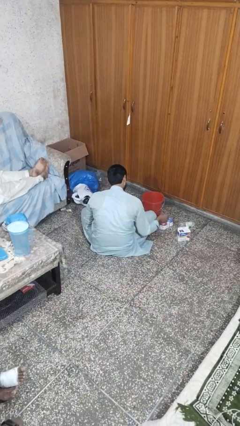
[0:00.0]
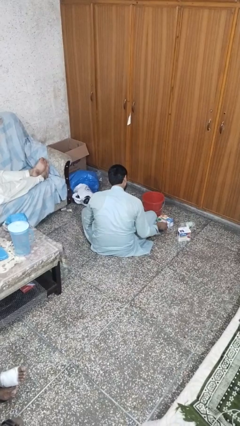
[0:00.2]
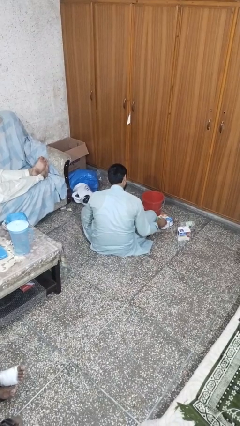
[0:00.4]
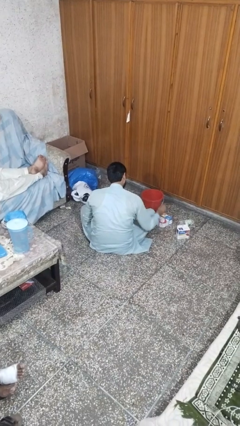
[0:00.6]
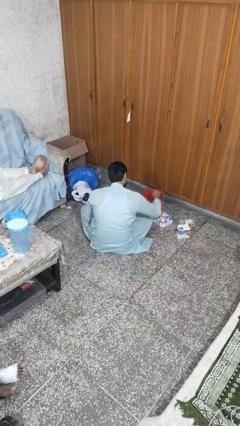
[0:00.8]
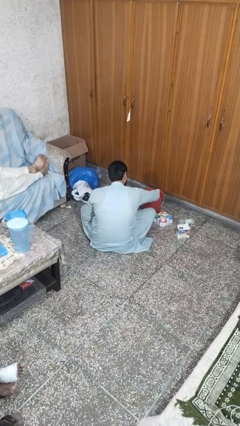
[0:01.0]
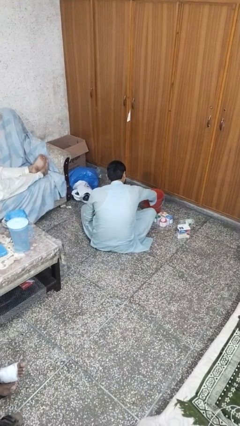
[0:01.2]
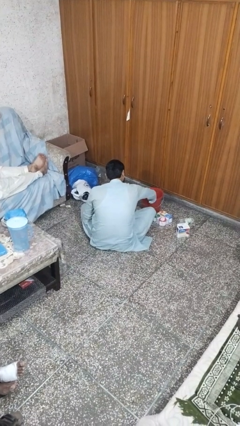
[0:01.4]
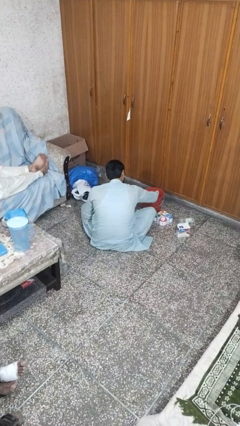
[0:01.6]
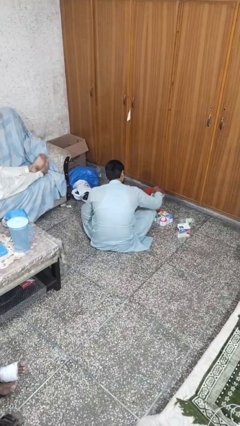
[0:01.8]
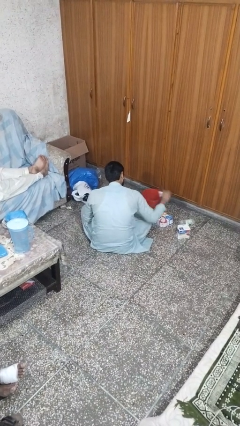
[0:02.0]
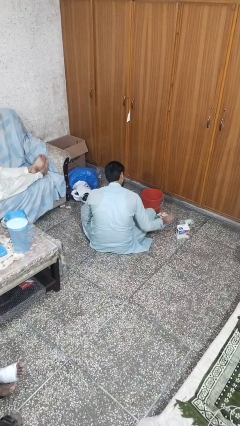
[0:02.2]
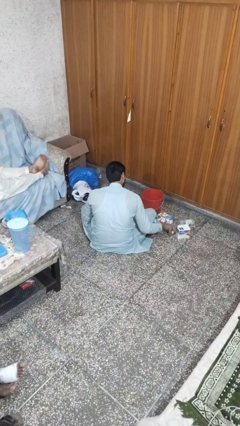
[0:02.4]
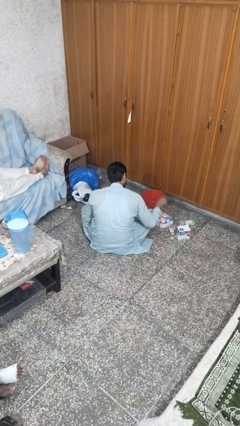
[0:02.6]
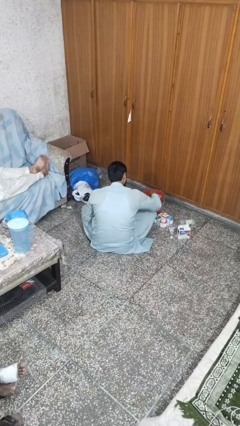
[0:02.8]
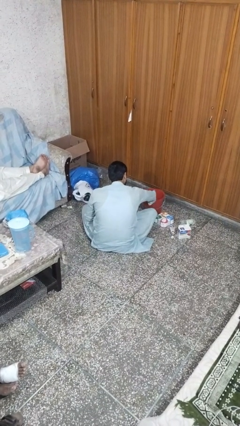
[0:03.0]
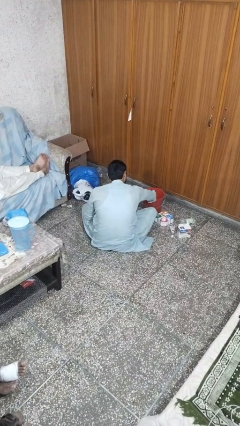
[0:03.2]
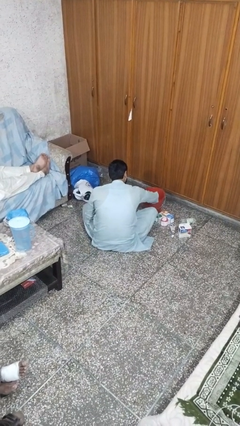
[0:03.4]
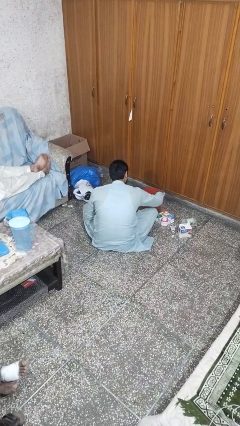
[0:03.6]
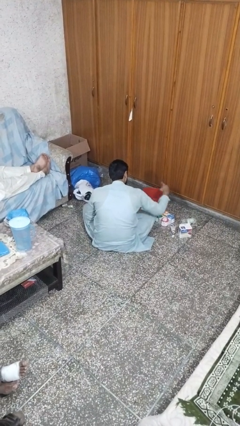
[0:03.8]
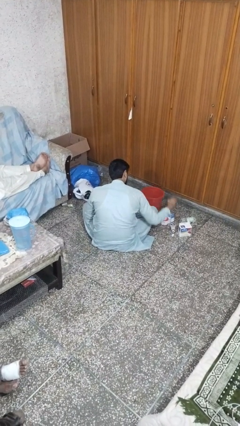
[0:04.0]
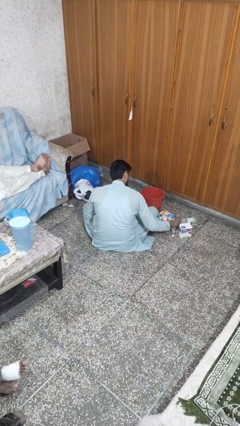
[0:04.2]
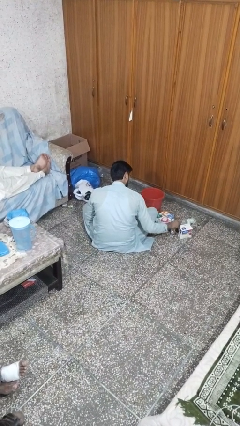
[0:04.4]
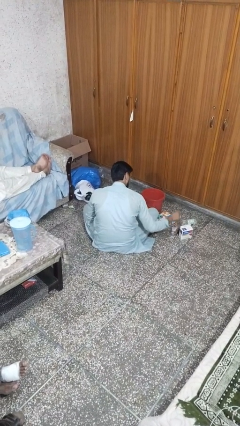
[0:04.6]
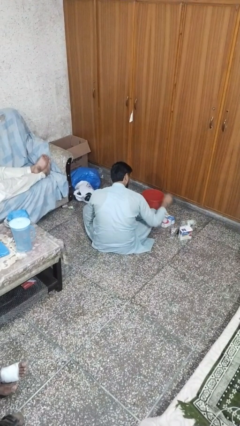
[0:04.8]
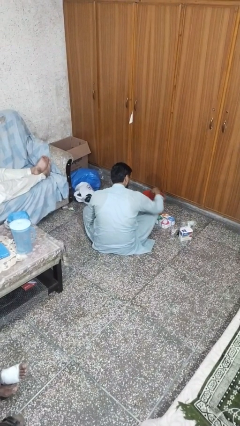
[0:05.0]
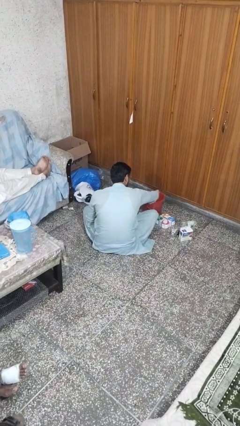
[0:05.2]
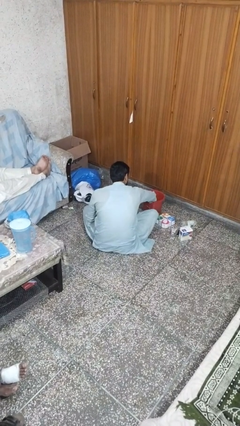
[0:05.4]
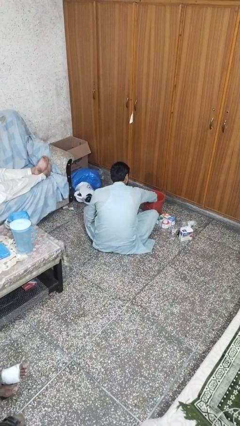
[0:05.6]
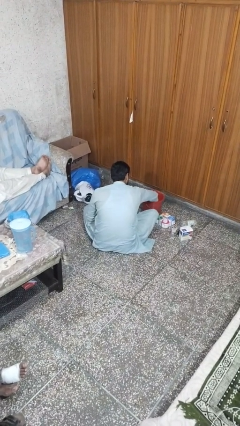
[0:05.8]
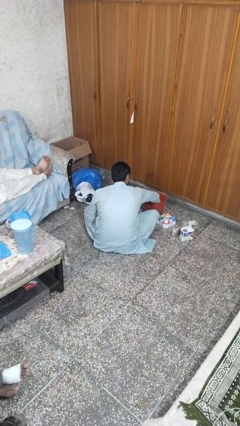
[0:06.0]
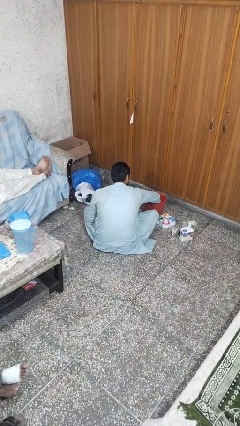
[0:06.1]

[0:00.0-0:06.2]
person takes object from basket

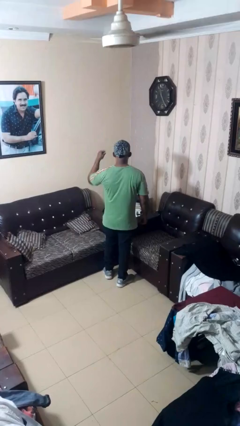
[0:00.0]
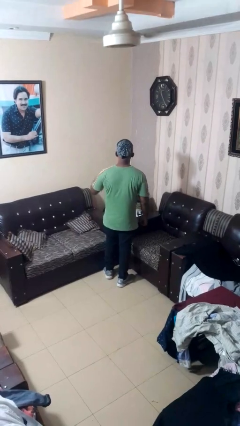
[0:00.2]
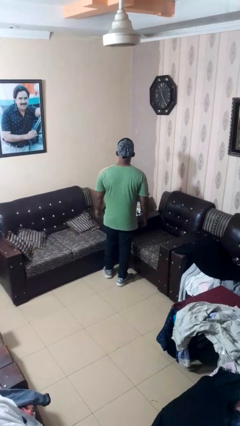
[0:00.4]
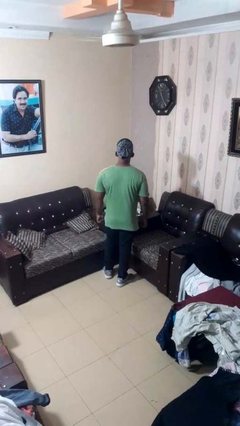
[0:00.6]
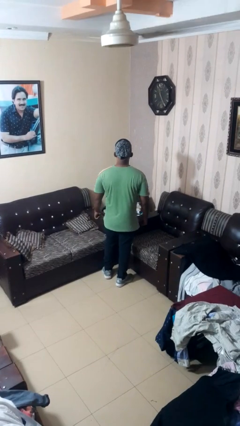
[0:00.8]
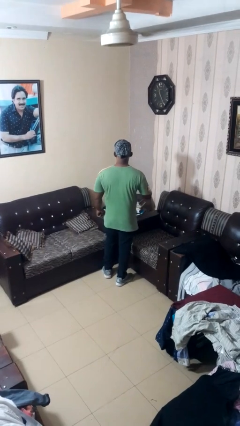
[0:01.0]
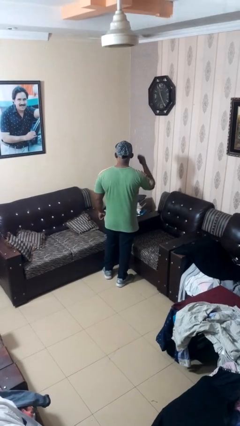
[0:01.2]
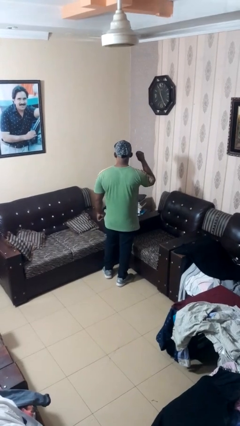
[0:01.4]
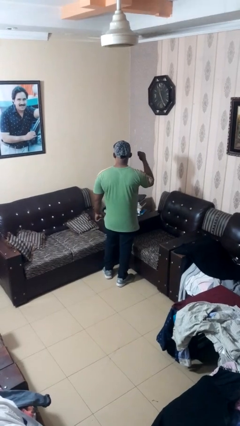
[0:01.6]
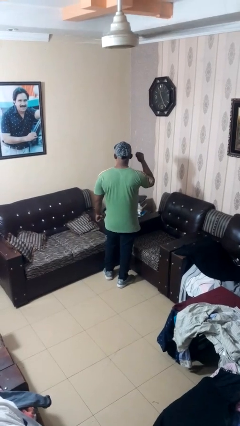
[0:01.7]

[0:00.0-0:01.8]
person gestures behind me

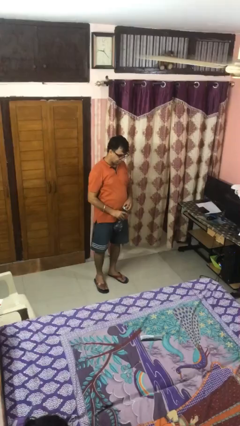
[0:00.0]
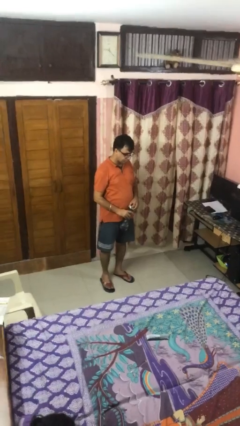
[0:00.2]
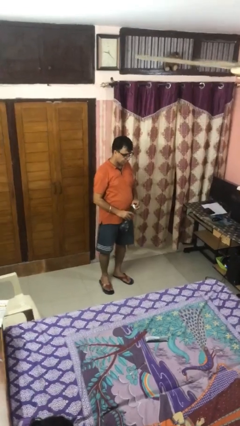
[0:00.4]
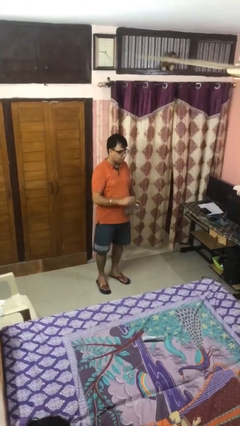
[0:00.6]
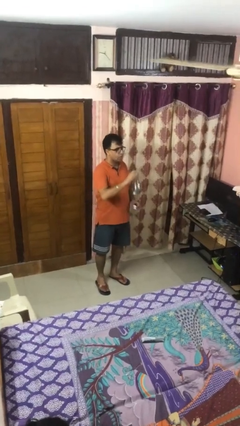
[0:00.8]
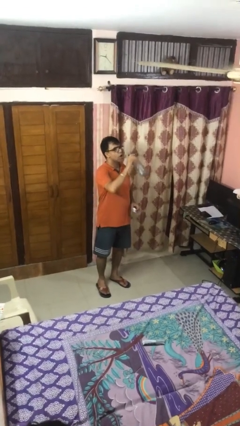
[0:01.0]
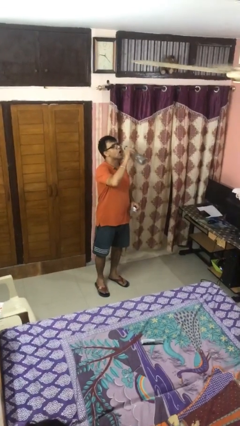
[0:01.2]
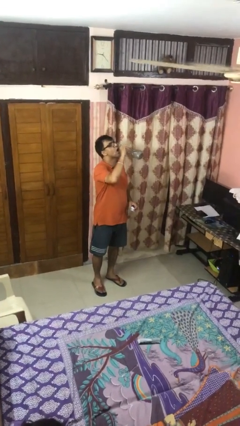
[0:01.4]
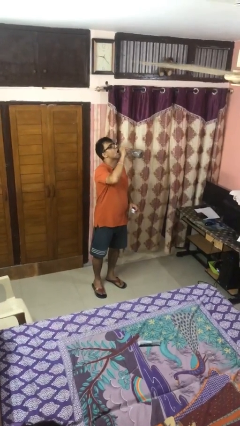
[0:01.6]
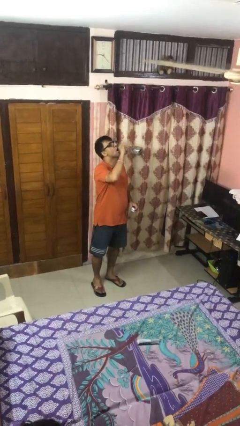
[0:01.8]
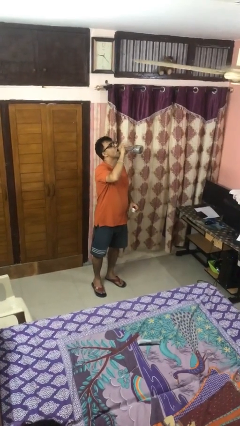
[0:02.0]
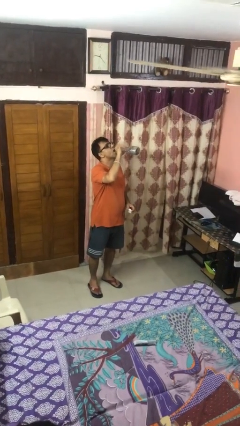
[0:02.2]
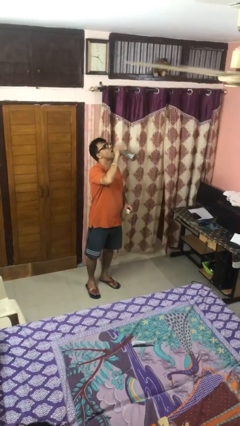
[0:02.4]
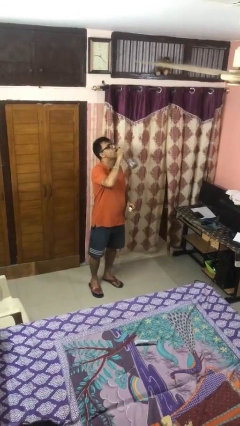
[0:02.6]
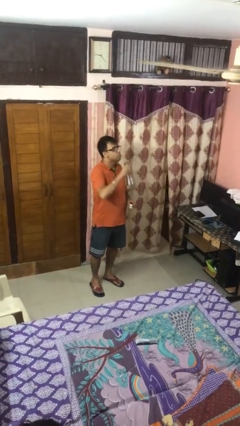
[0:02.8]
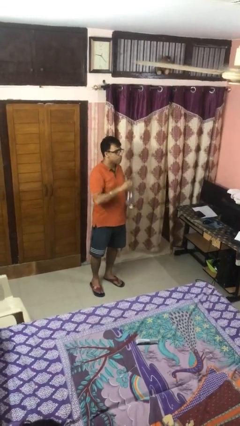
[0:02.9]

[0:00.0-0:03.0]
person drinks from bottle

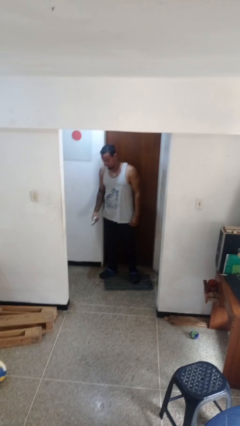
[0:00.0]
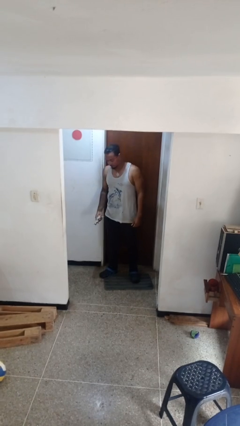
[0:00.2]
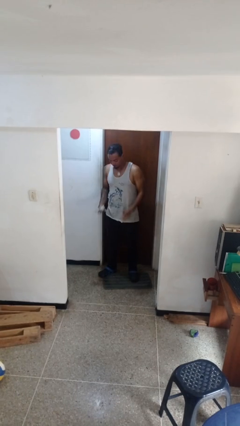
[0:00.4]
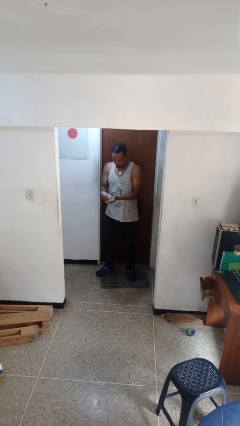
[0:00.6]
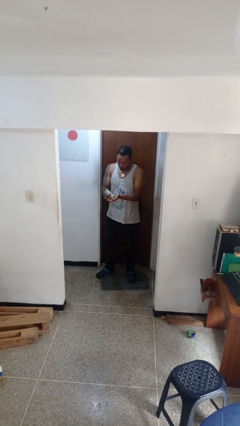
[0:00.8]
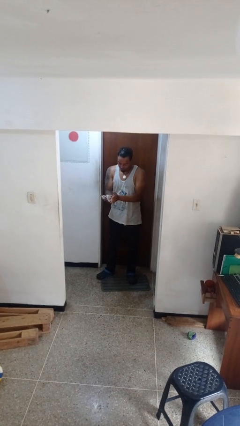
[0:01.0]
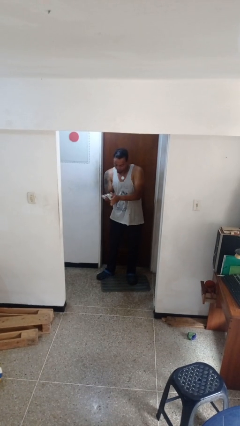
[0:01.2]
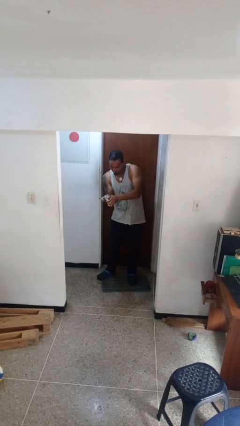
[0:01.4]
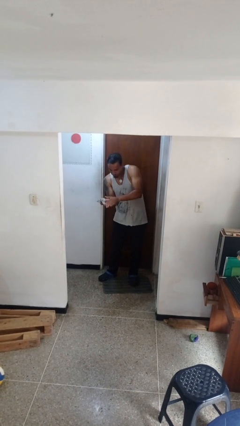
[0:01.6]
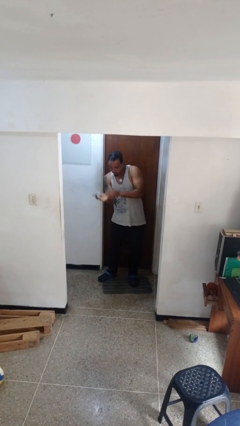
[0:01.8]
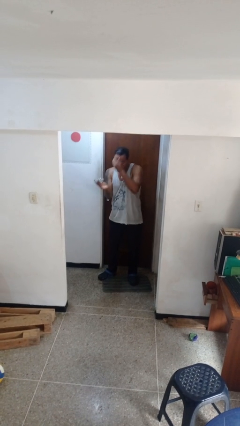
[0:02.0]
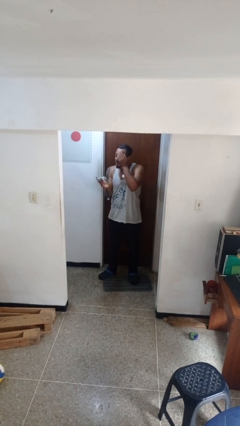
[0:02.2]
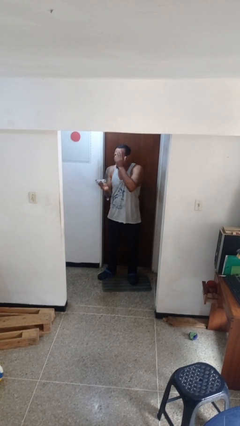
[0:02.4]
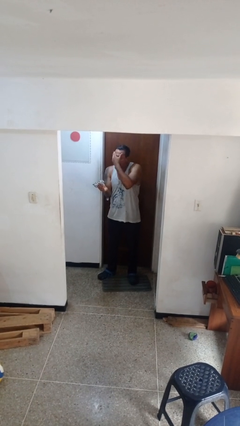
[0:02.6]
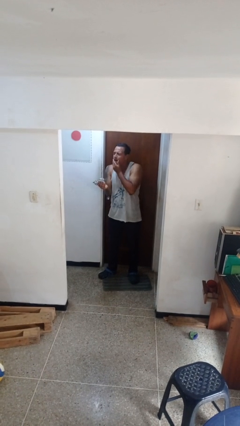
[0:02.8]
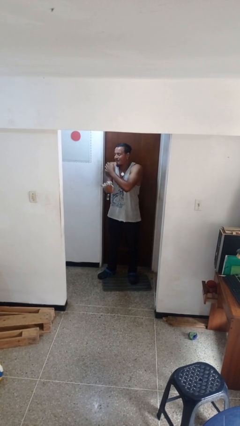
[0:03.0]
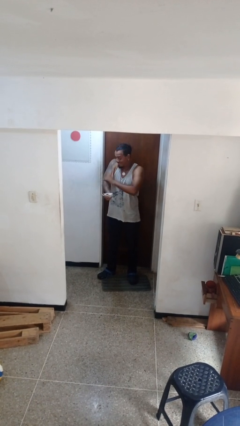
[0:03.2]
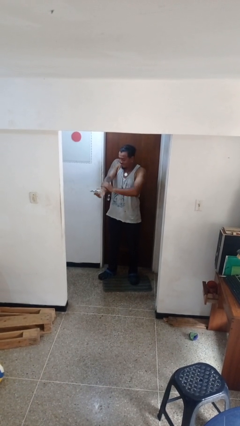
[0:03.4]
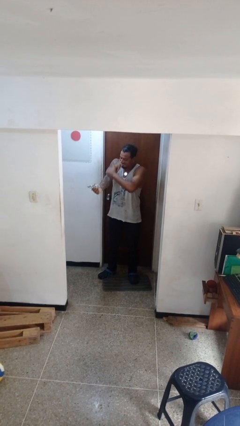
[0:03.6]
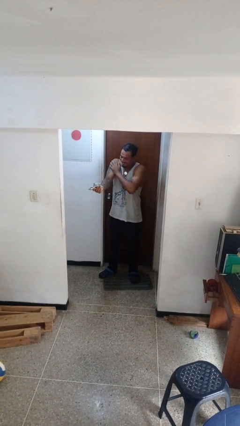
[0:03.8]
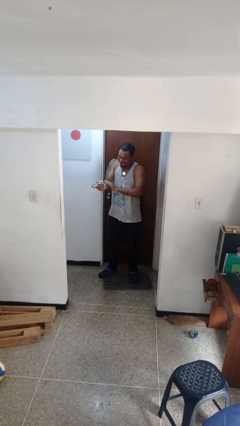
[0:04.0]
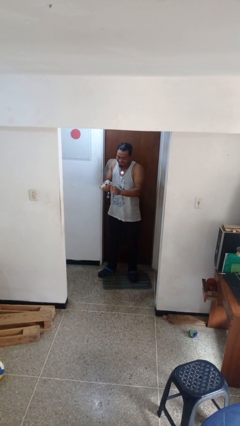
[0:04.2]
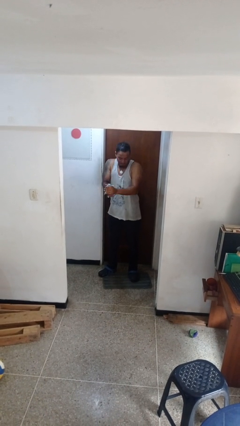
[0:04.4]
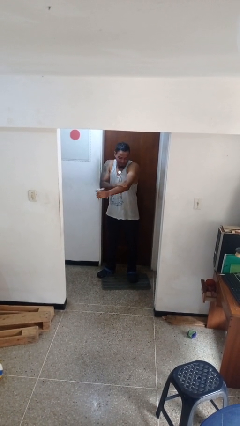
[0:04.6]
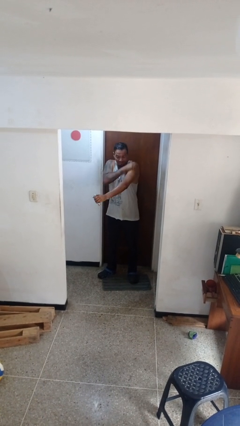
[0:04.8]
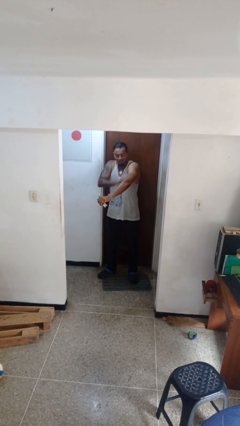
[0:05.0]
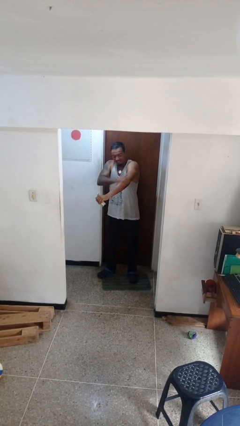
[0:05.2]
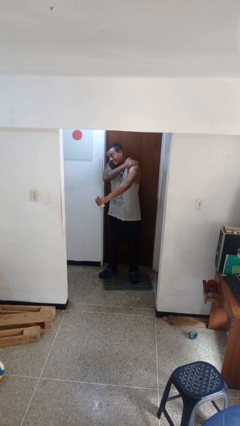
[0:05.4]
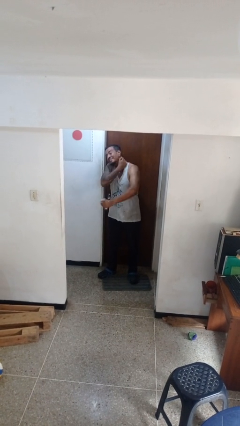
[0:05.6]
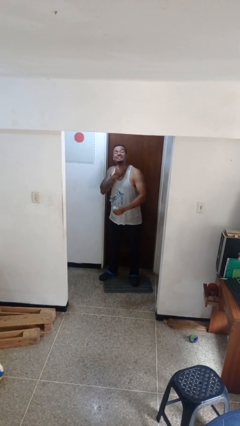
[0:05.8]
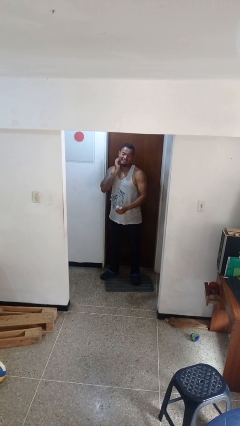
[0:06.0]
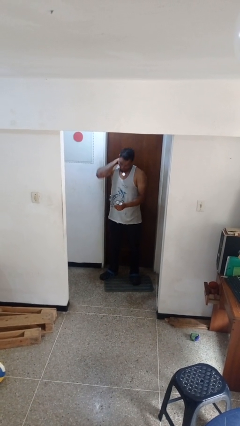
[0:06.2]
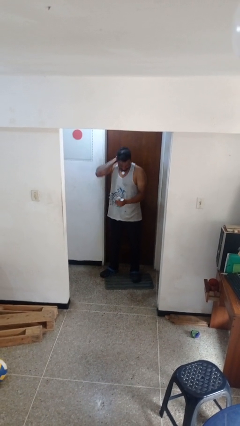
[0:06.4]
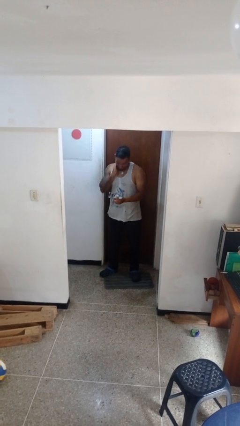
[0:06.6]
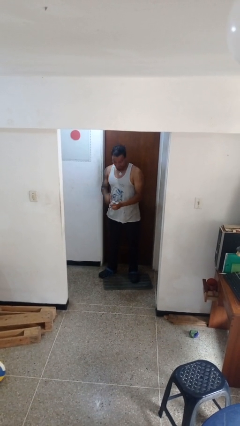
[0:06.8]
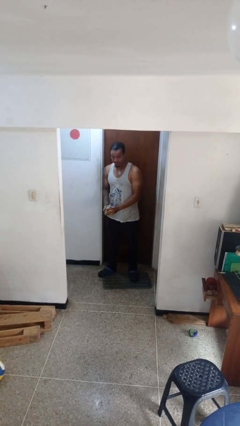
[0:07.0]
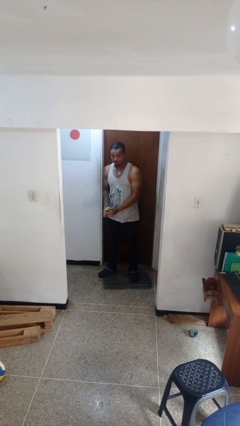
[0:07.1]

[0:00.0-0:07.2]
person applies sunscreen
